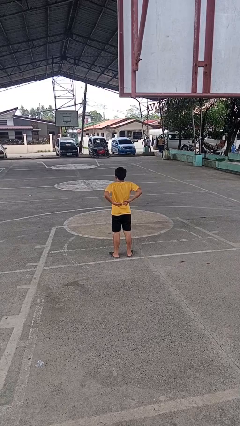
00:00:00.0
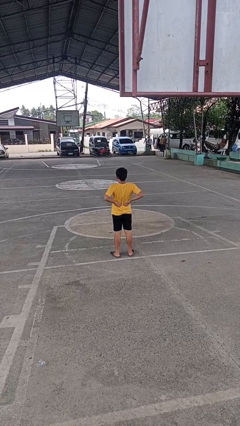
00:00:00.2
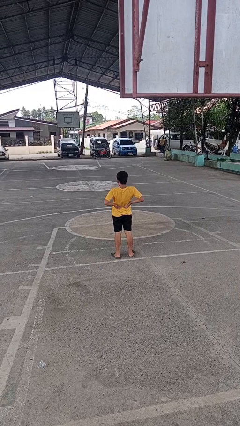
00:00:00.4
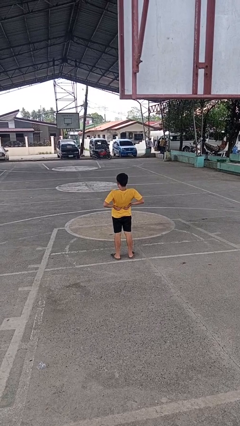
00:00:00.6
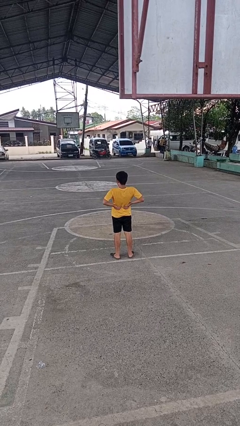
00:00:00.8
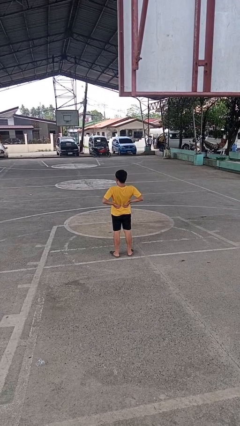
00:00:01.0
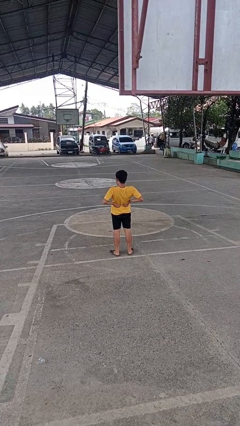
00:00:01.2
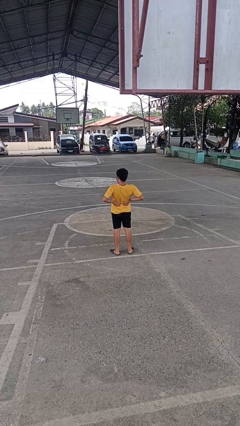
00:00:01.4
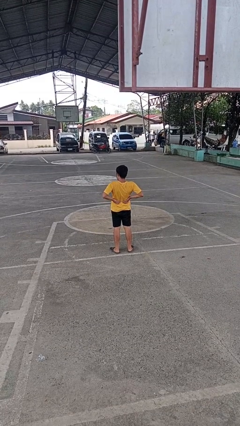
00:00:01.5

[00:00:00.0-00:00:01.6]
person stretches back

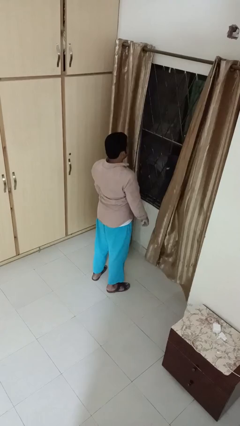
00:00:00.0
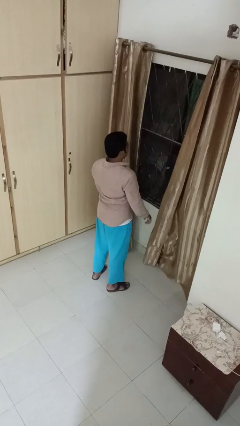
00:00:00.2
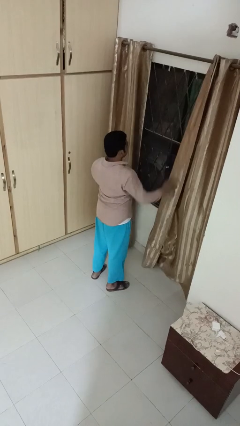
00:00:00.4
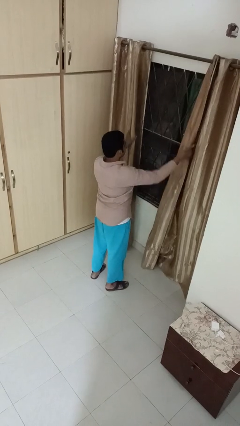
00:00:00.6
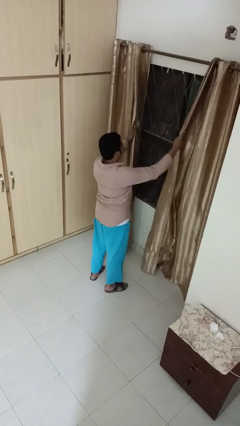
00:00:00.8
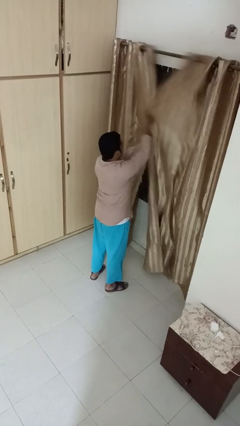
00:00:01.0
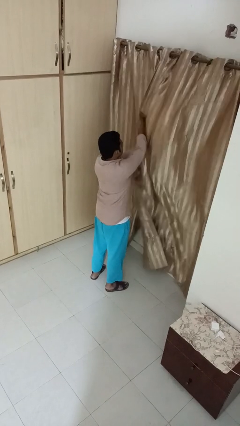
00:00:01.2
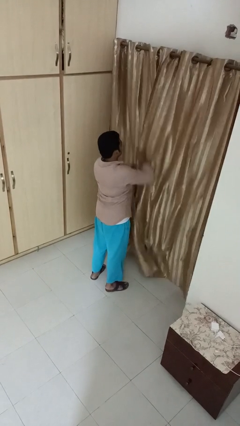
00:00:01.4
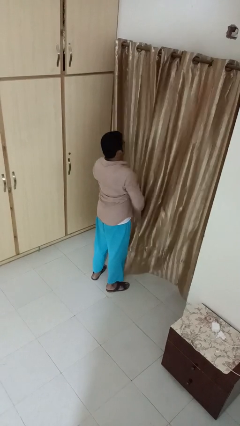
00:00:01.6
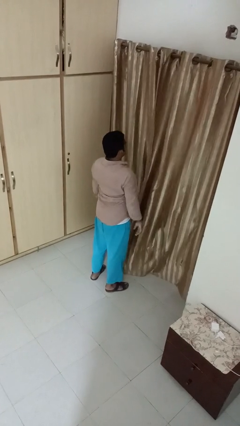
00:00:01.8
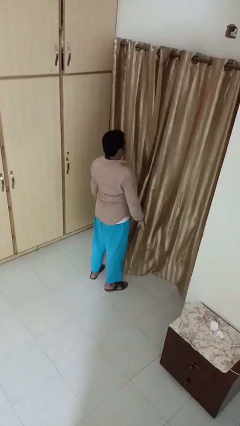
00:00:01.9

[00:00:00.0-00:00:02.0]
person closes curtains

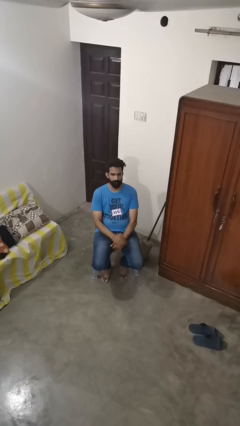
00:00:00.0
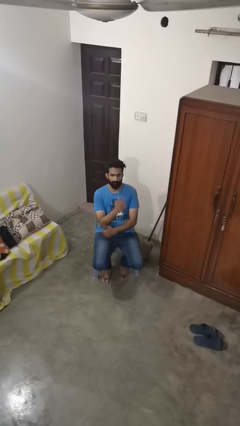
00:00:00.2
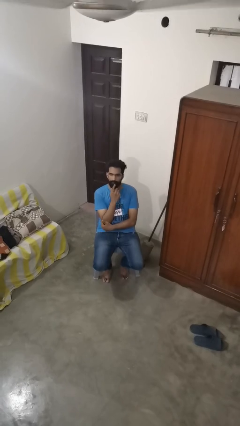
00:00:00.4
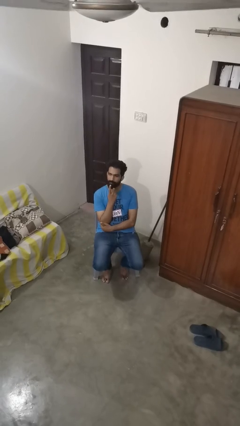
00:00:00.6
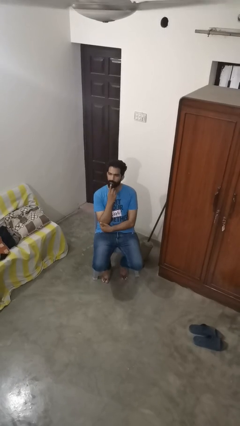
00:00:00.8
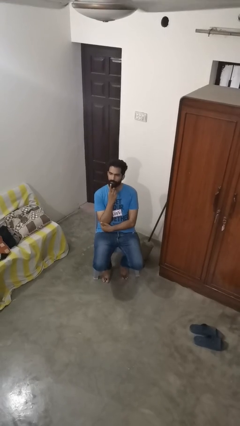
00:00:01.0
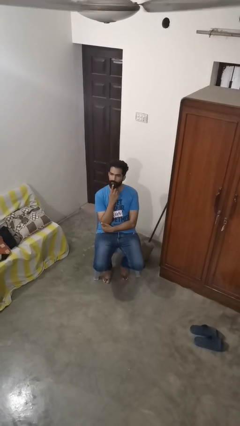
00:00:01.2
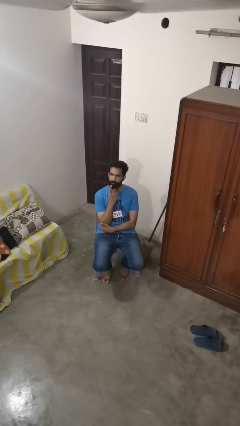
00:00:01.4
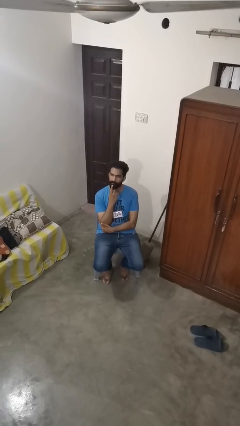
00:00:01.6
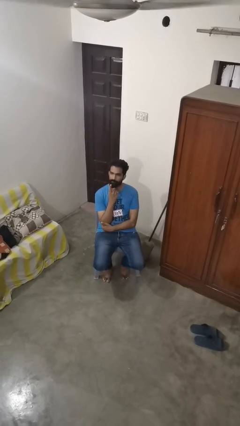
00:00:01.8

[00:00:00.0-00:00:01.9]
person strokes chin

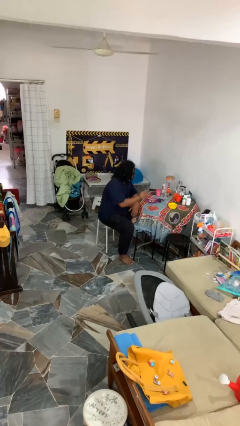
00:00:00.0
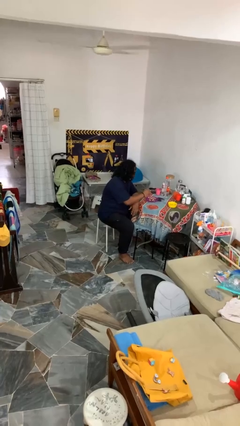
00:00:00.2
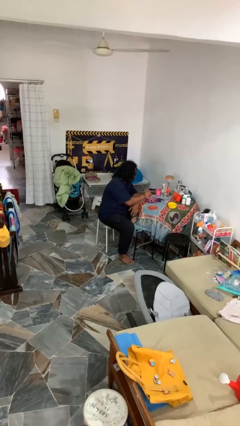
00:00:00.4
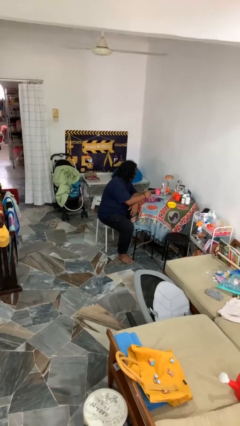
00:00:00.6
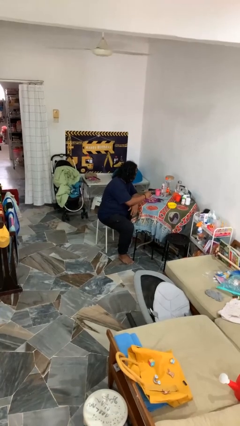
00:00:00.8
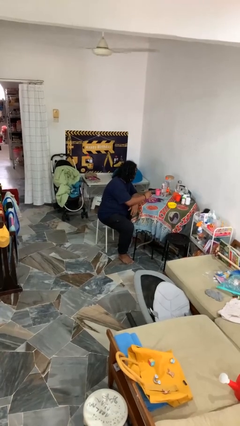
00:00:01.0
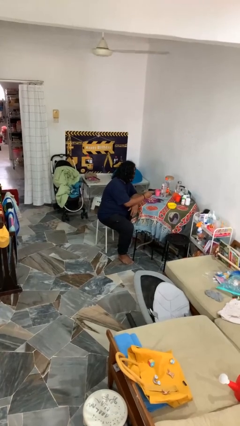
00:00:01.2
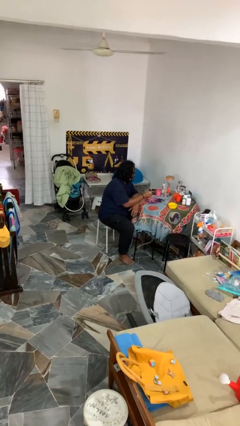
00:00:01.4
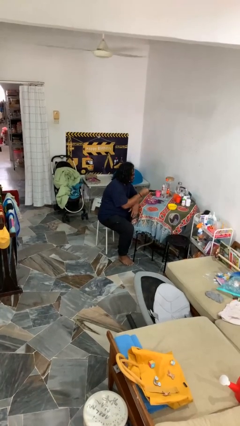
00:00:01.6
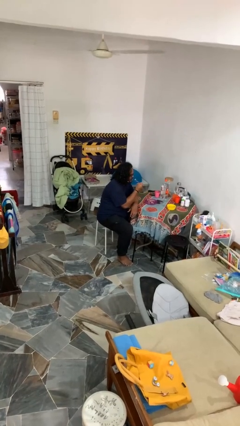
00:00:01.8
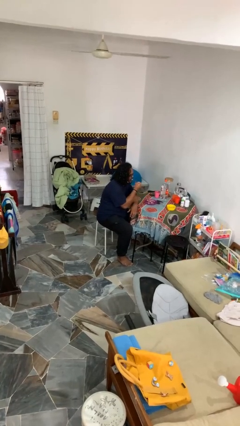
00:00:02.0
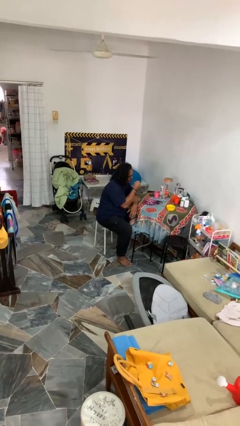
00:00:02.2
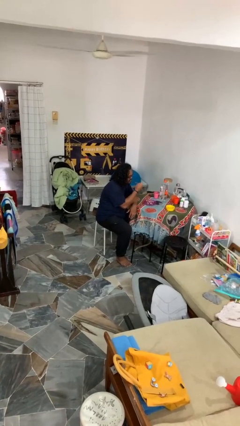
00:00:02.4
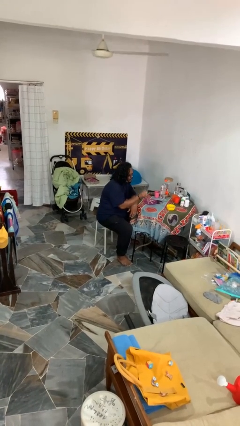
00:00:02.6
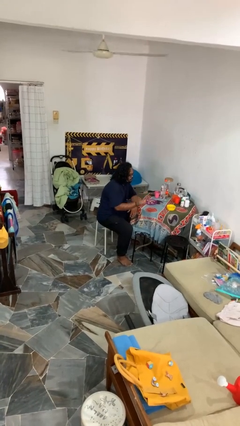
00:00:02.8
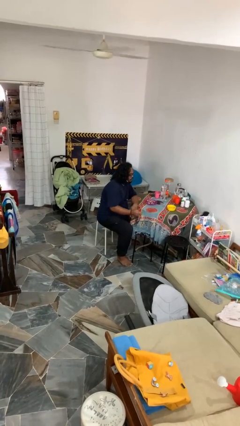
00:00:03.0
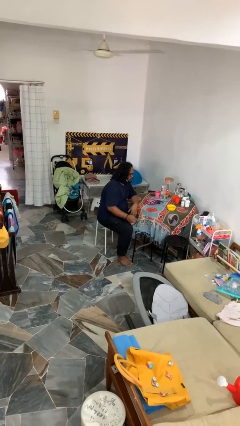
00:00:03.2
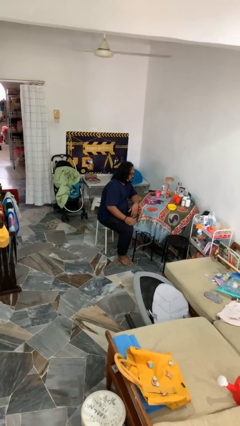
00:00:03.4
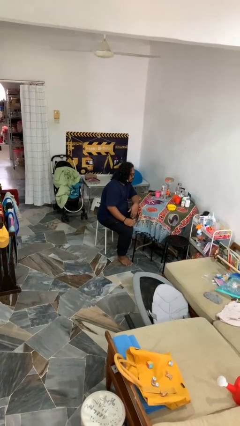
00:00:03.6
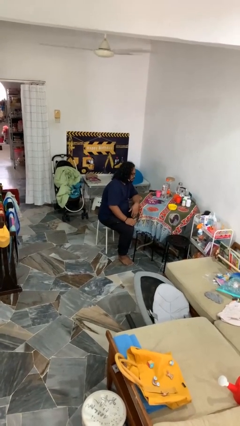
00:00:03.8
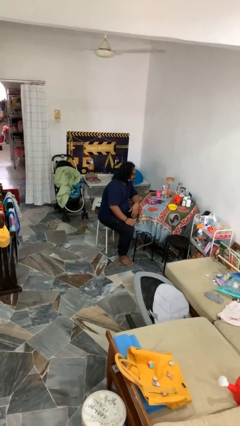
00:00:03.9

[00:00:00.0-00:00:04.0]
person eats with utensil

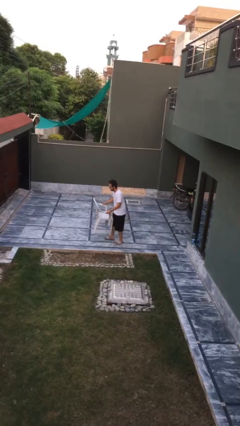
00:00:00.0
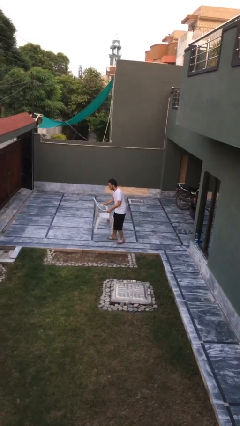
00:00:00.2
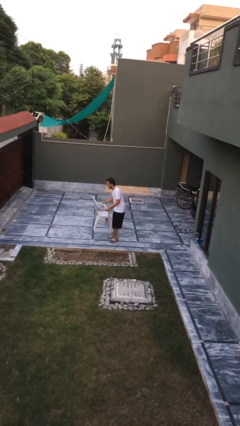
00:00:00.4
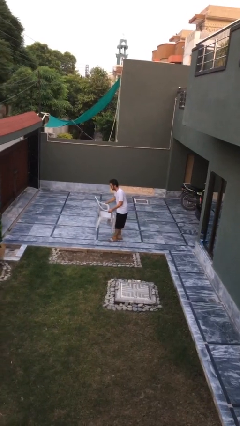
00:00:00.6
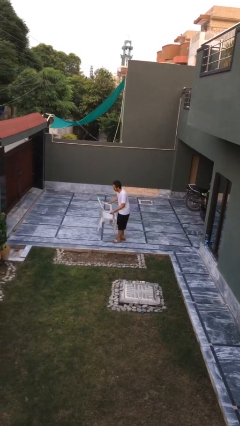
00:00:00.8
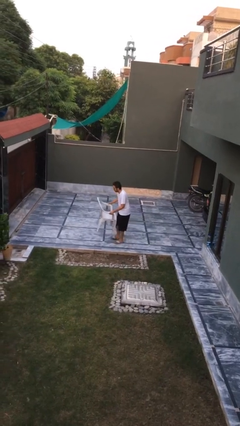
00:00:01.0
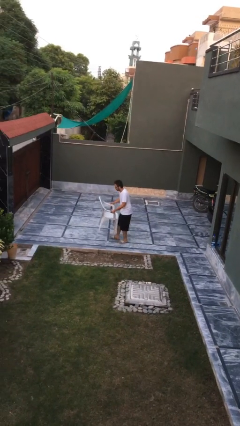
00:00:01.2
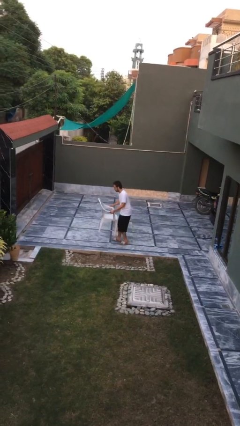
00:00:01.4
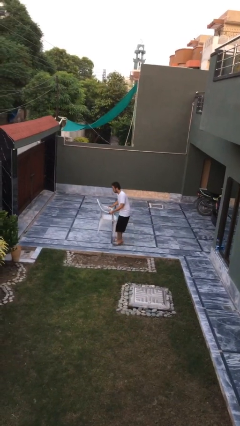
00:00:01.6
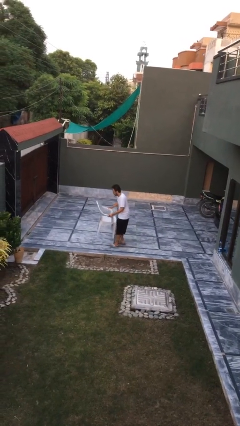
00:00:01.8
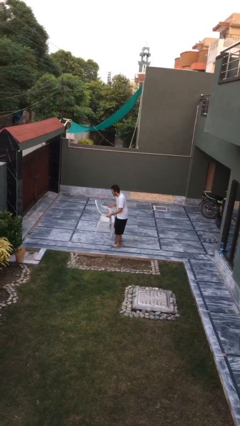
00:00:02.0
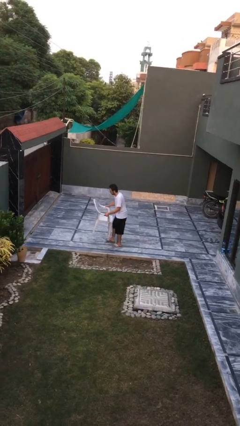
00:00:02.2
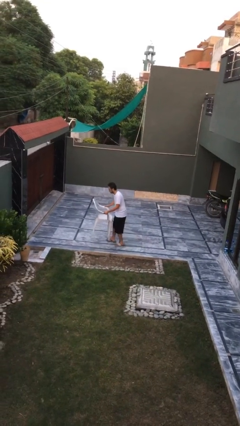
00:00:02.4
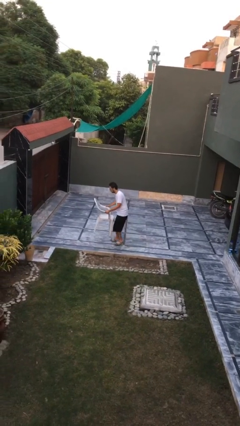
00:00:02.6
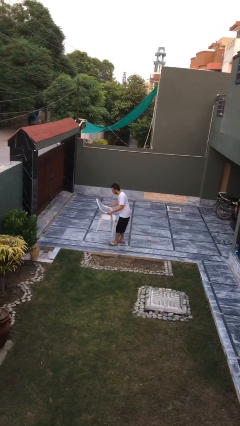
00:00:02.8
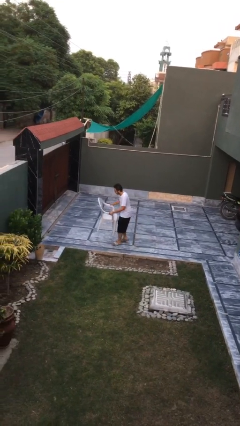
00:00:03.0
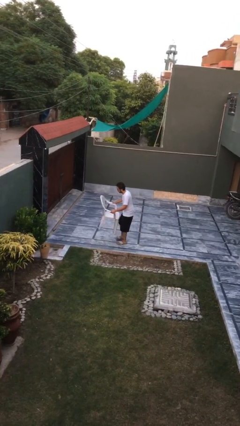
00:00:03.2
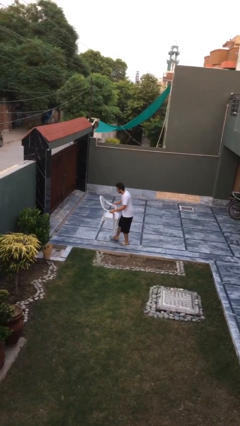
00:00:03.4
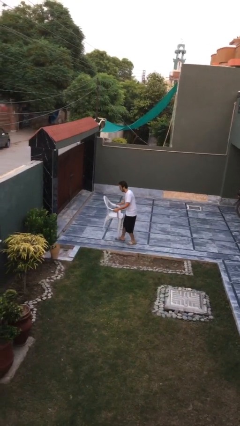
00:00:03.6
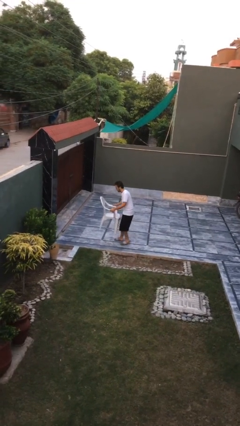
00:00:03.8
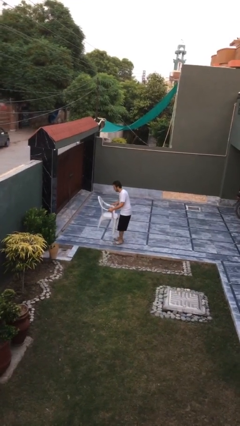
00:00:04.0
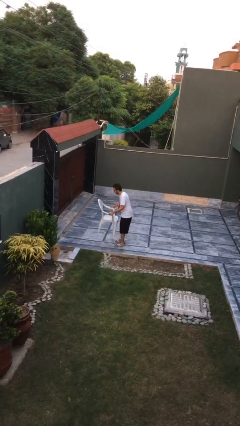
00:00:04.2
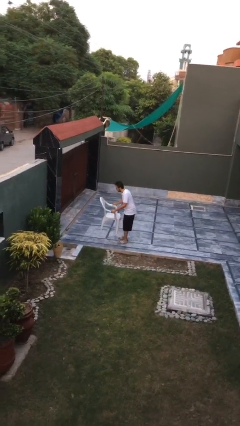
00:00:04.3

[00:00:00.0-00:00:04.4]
person carries heavy object

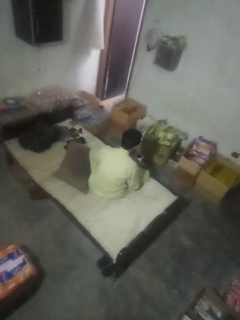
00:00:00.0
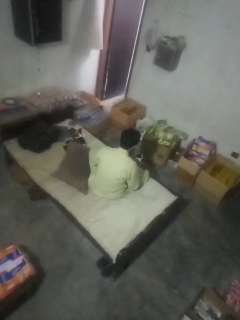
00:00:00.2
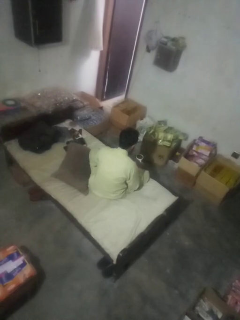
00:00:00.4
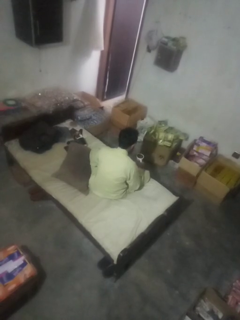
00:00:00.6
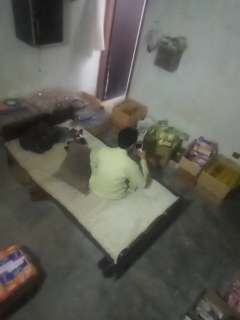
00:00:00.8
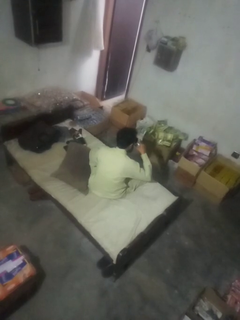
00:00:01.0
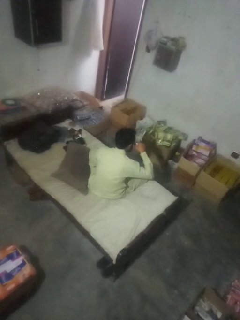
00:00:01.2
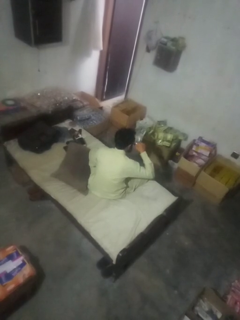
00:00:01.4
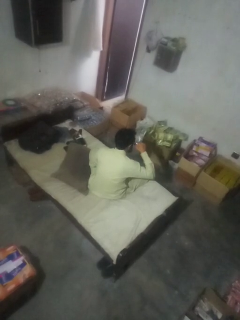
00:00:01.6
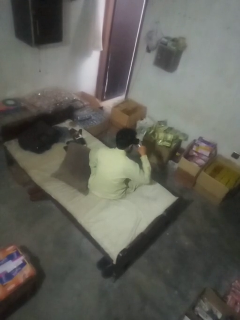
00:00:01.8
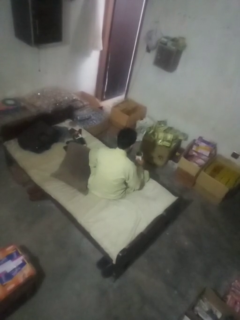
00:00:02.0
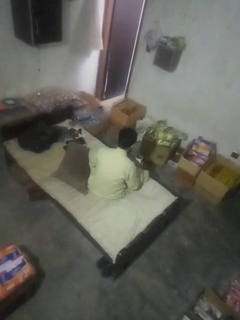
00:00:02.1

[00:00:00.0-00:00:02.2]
person drinks from mug

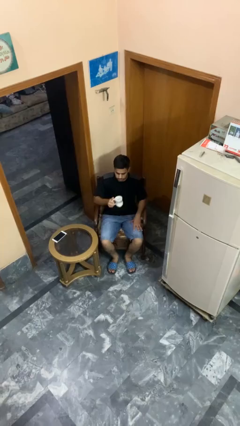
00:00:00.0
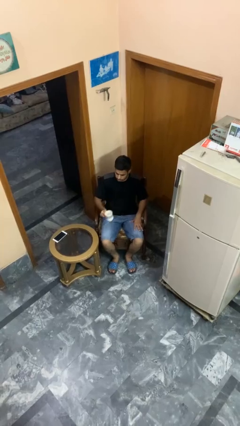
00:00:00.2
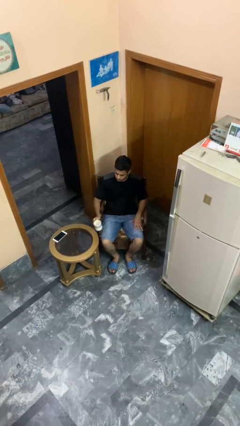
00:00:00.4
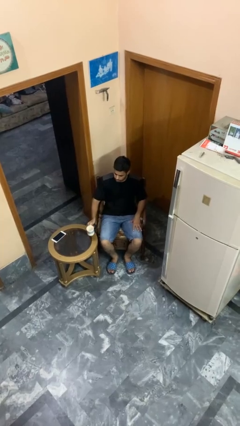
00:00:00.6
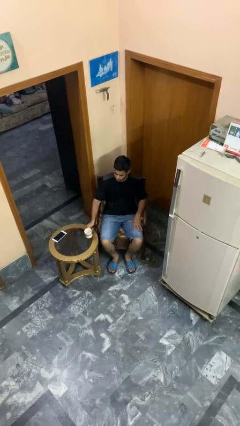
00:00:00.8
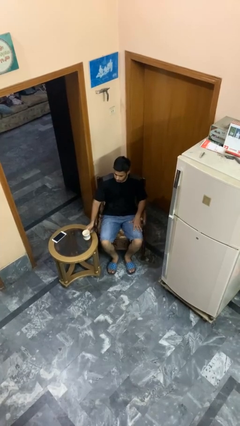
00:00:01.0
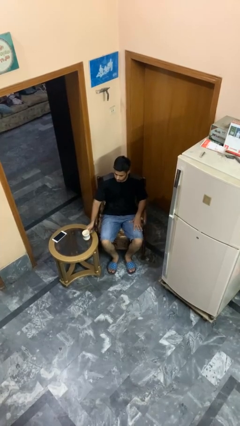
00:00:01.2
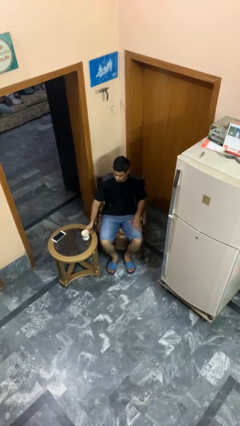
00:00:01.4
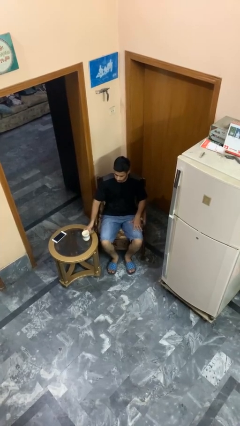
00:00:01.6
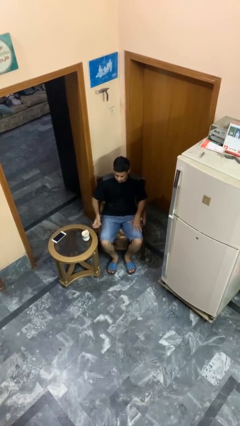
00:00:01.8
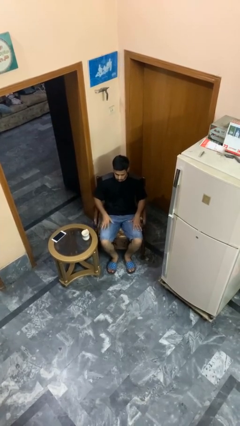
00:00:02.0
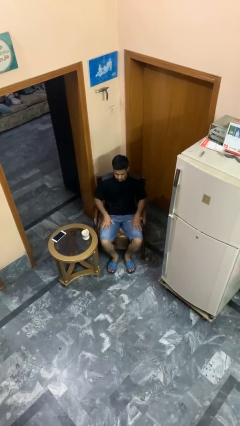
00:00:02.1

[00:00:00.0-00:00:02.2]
person puts down object on table
